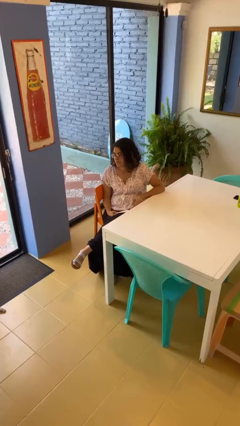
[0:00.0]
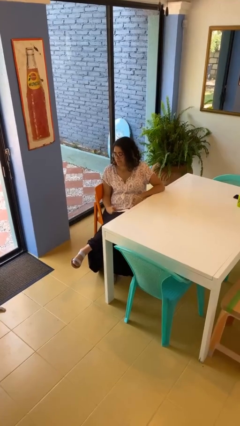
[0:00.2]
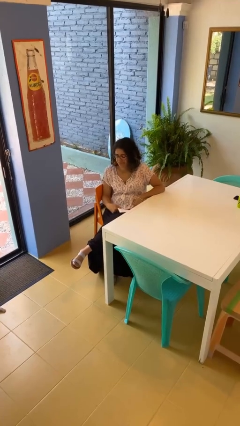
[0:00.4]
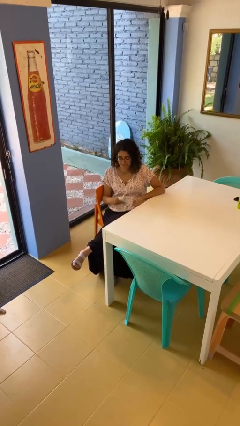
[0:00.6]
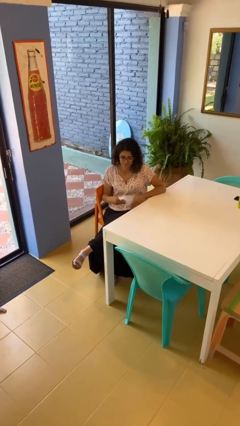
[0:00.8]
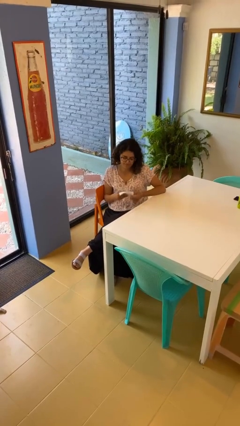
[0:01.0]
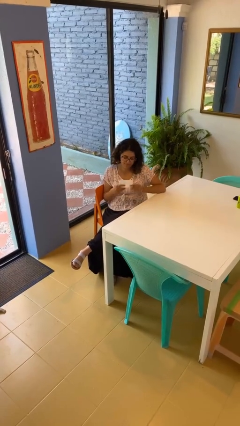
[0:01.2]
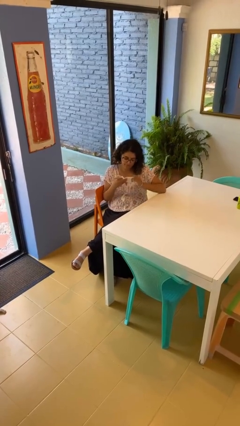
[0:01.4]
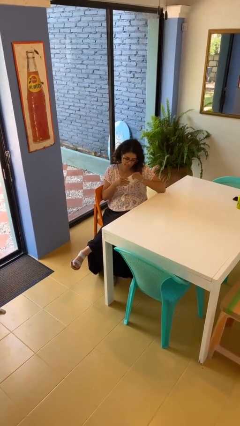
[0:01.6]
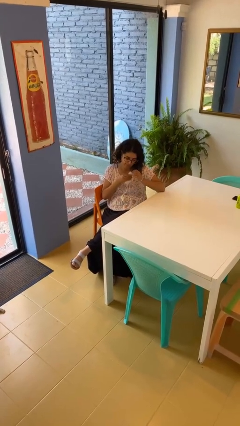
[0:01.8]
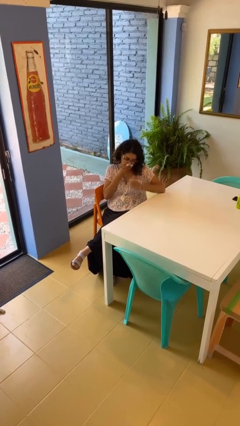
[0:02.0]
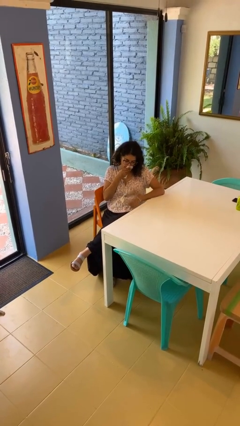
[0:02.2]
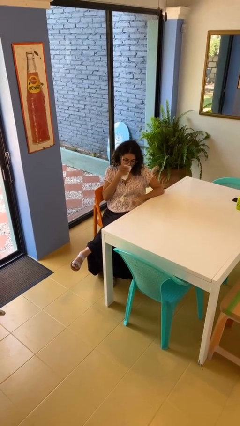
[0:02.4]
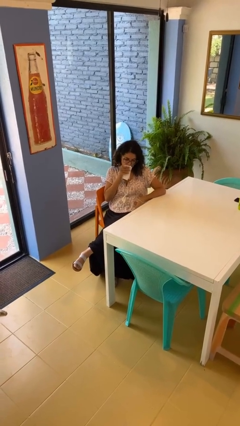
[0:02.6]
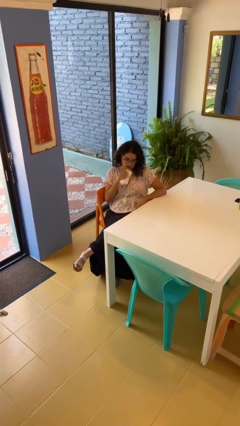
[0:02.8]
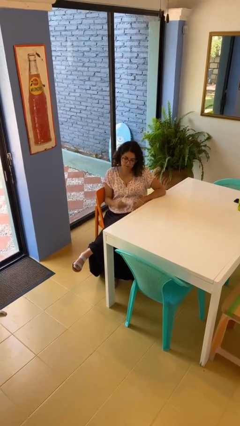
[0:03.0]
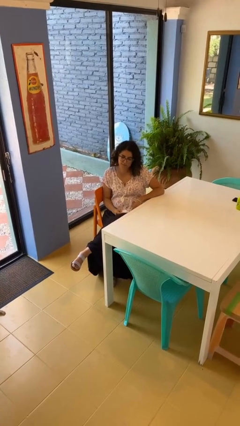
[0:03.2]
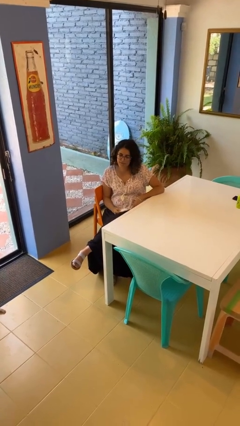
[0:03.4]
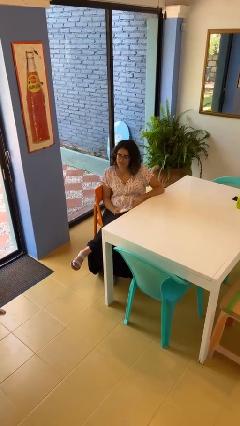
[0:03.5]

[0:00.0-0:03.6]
person wipes mouth with napkin

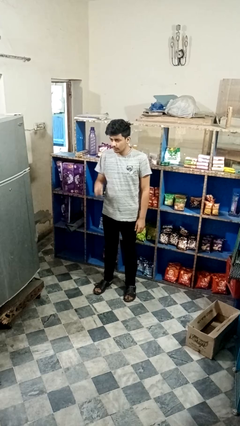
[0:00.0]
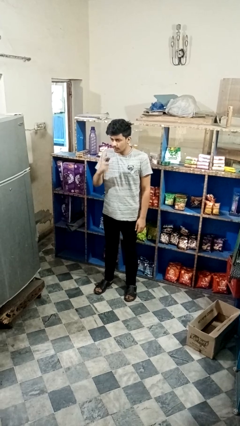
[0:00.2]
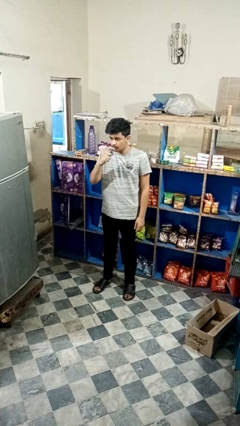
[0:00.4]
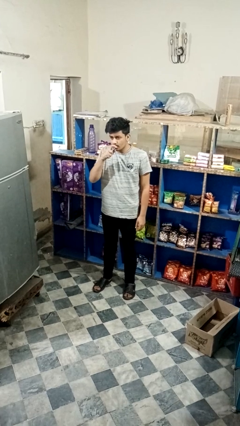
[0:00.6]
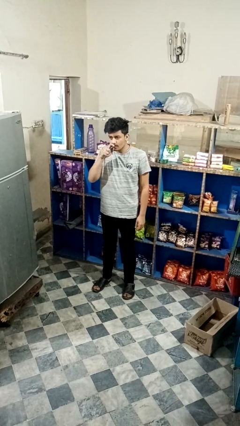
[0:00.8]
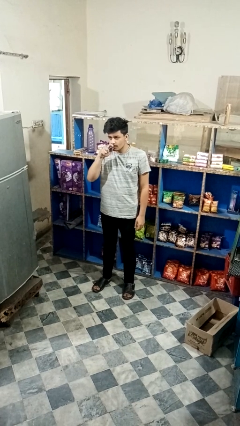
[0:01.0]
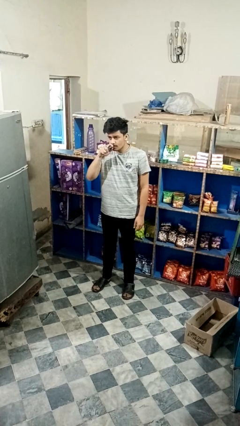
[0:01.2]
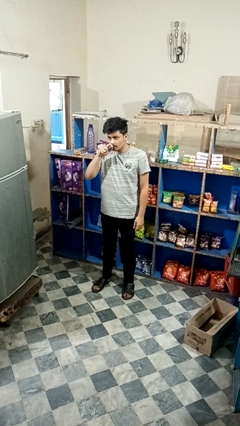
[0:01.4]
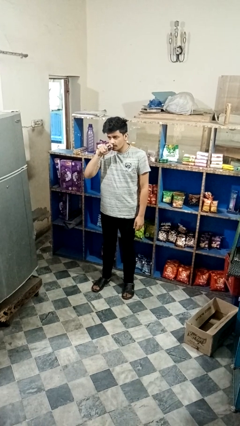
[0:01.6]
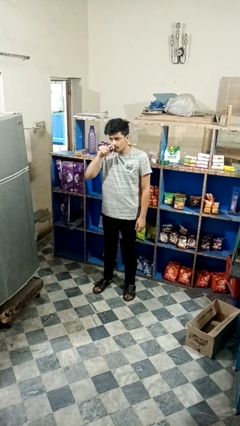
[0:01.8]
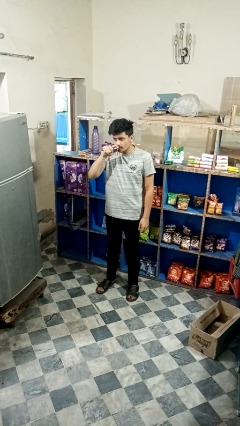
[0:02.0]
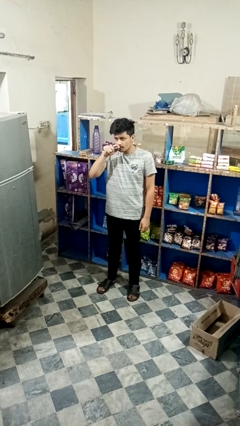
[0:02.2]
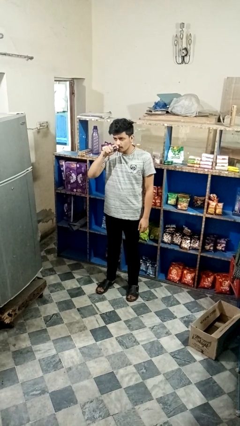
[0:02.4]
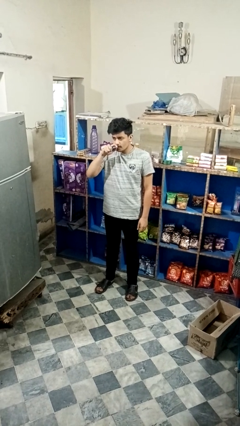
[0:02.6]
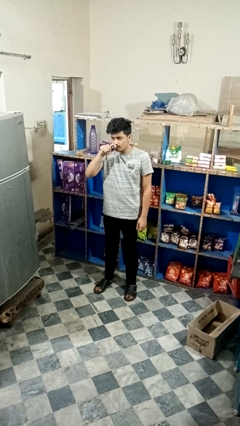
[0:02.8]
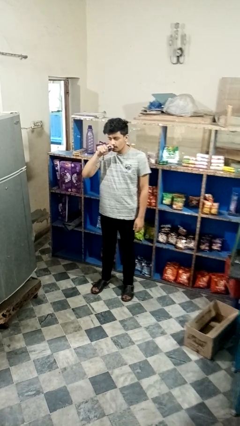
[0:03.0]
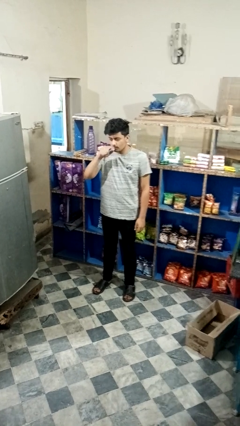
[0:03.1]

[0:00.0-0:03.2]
person vapes

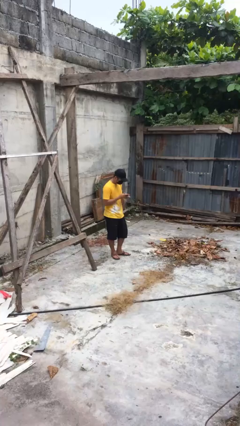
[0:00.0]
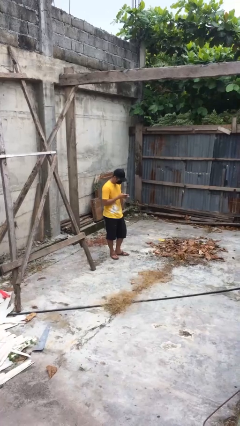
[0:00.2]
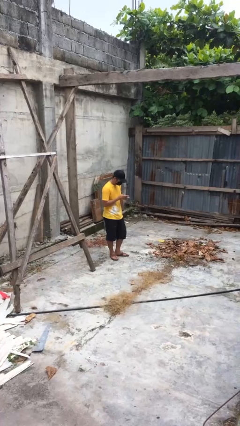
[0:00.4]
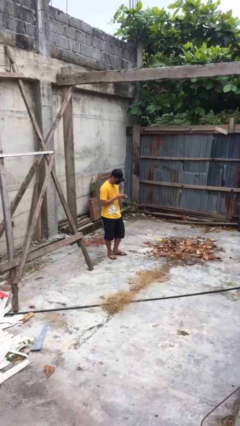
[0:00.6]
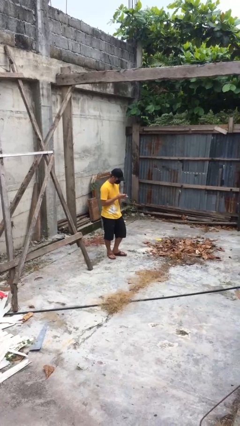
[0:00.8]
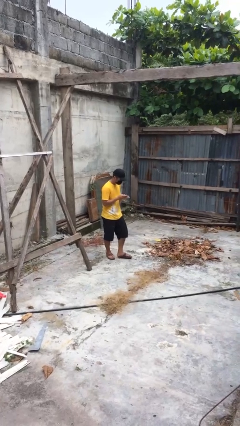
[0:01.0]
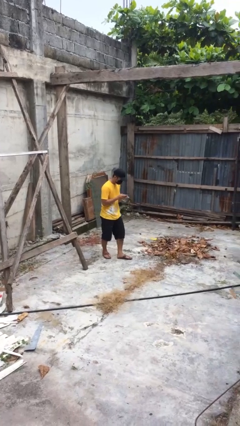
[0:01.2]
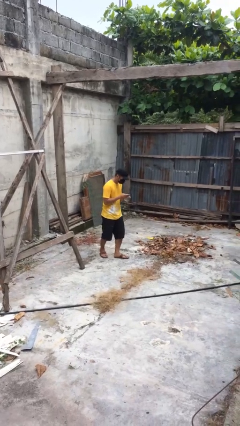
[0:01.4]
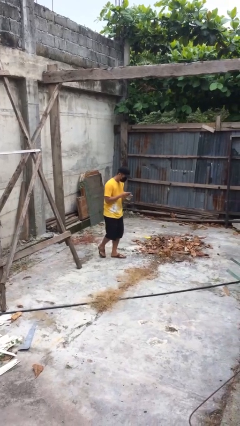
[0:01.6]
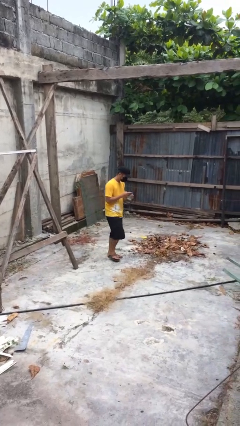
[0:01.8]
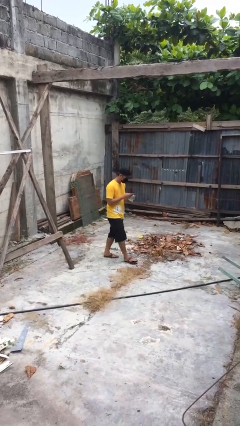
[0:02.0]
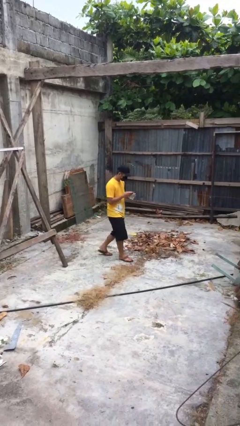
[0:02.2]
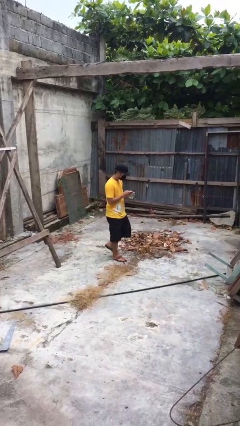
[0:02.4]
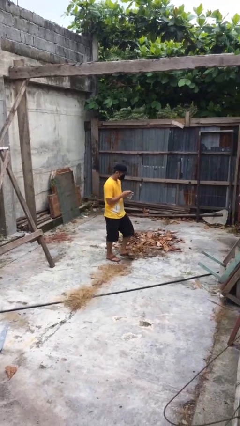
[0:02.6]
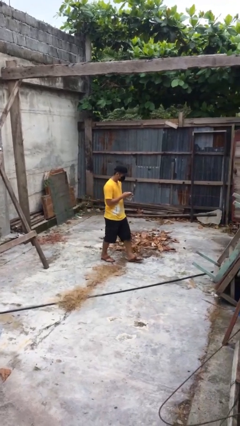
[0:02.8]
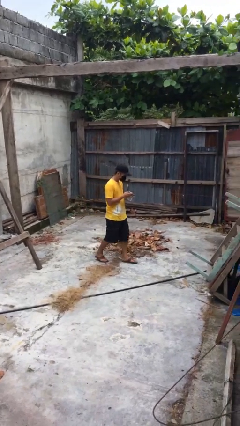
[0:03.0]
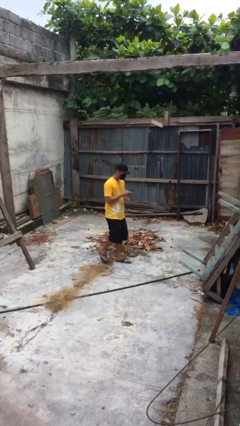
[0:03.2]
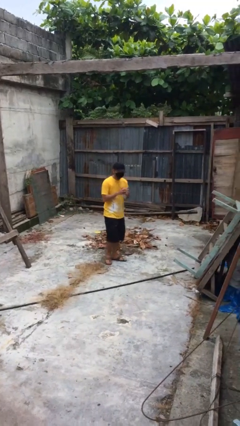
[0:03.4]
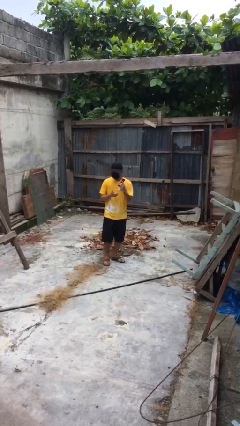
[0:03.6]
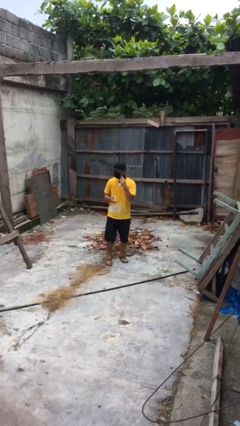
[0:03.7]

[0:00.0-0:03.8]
person texts on phone

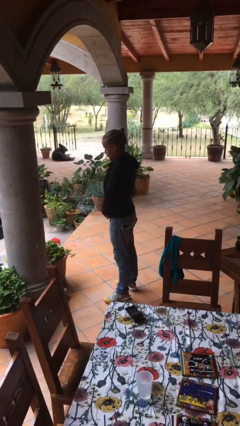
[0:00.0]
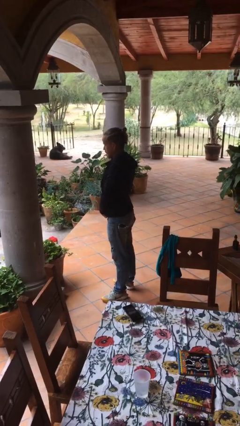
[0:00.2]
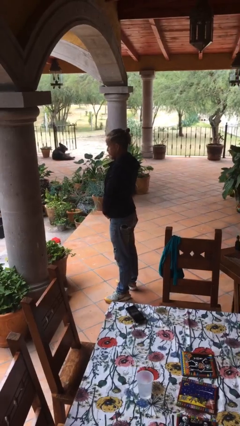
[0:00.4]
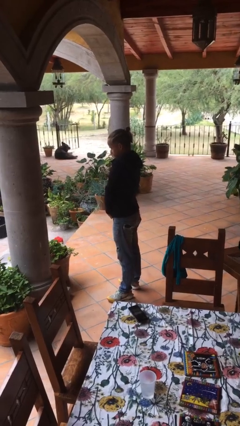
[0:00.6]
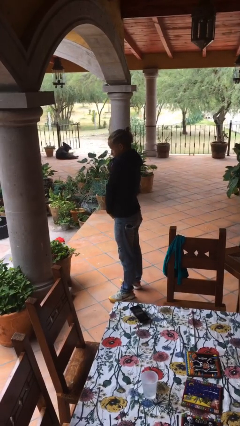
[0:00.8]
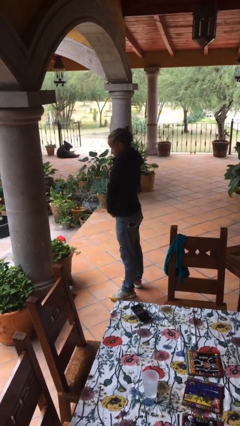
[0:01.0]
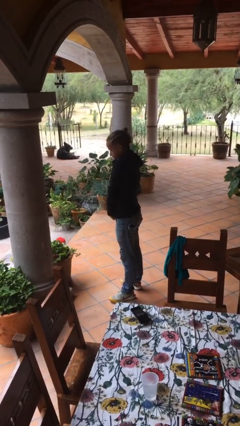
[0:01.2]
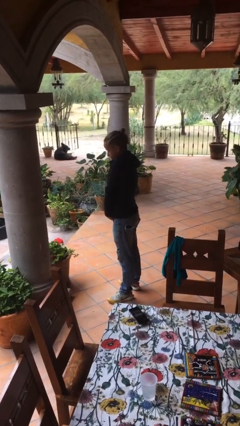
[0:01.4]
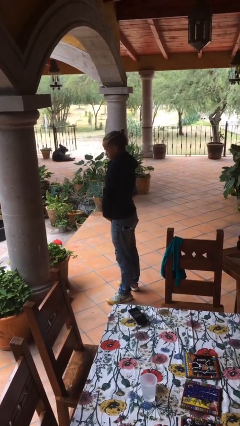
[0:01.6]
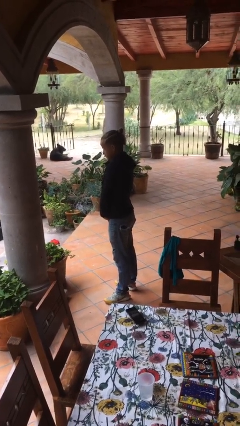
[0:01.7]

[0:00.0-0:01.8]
person unzips jacket

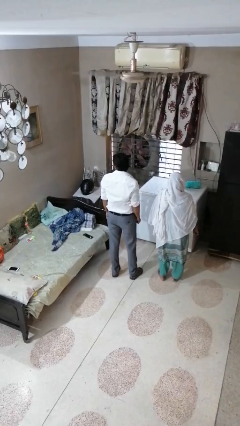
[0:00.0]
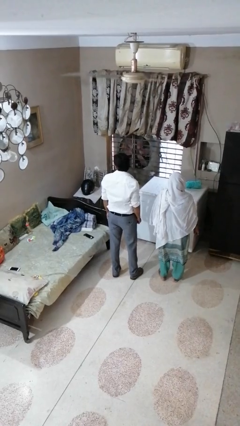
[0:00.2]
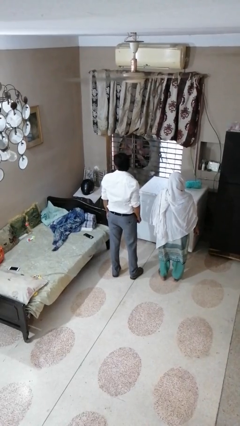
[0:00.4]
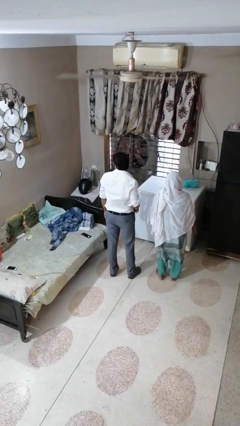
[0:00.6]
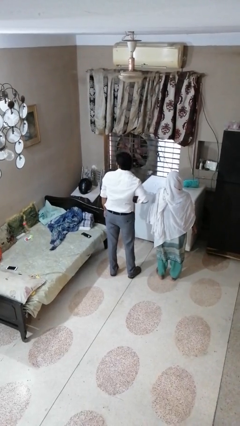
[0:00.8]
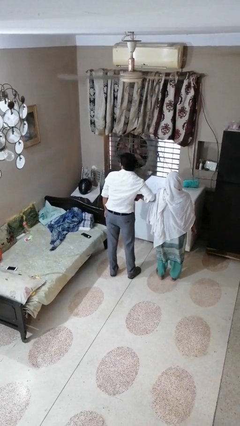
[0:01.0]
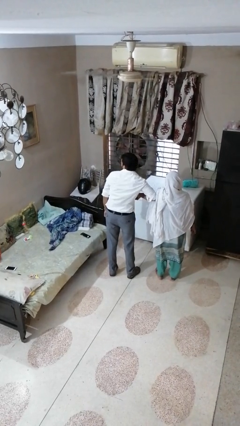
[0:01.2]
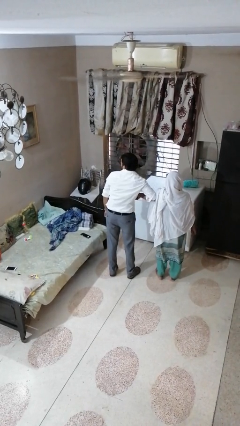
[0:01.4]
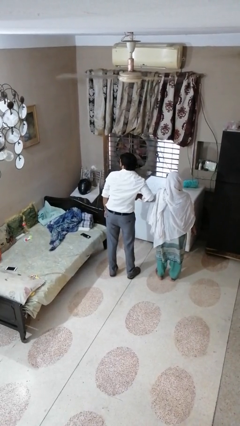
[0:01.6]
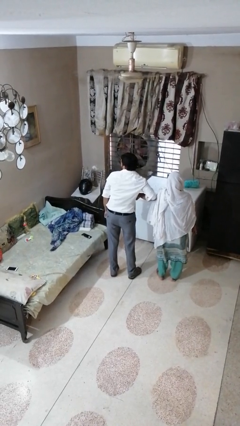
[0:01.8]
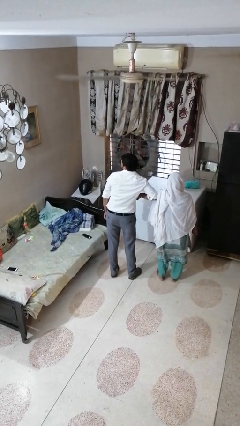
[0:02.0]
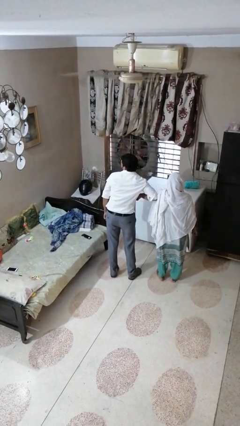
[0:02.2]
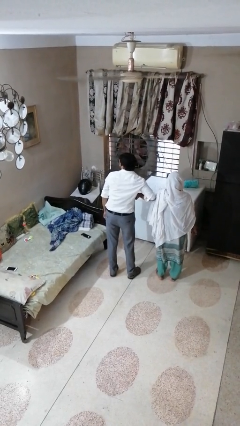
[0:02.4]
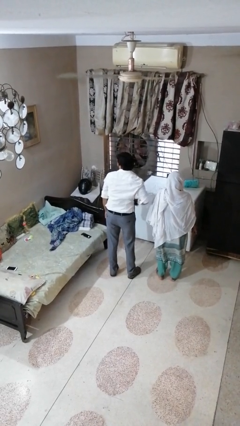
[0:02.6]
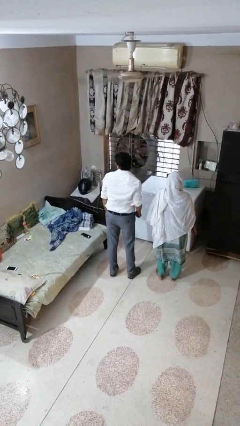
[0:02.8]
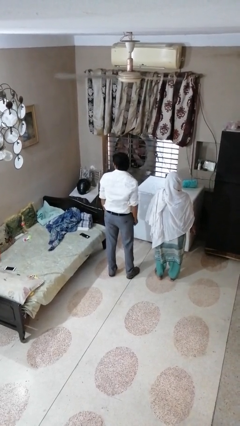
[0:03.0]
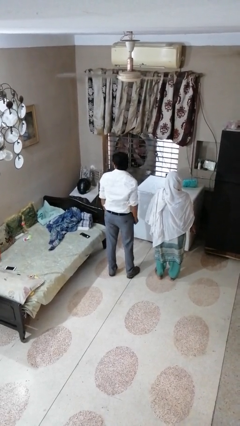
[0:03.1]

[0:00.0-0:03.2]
person nudges person with elbow

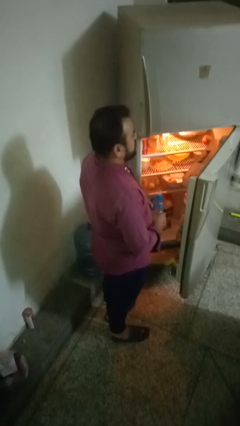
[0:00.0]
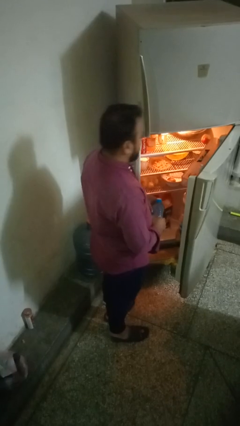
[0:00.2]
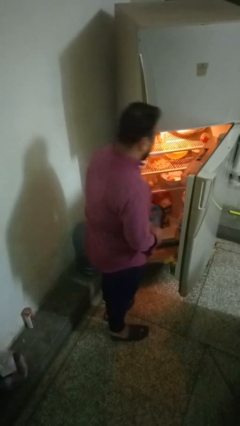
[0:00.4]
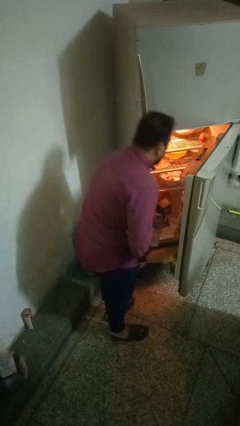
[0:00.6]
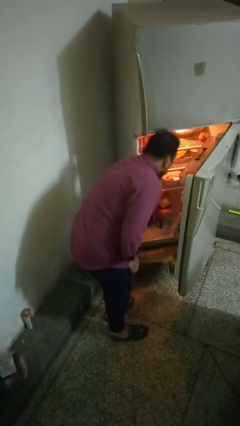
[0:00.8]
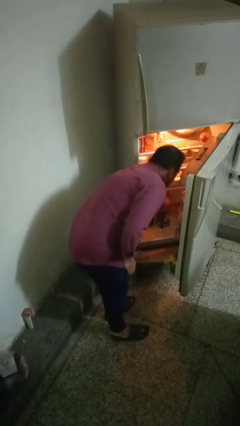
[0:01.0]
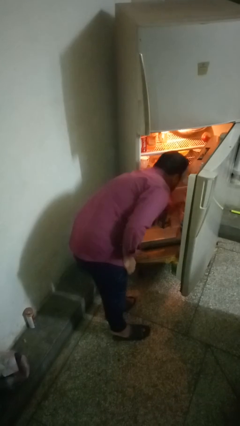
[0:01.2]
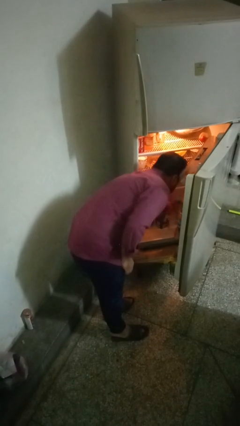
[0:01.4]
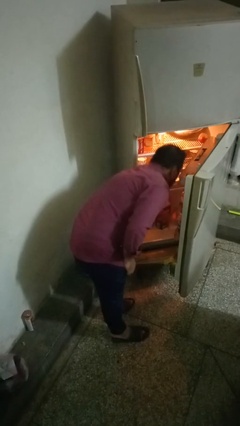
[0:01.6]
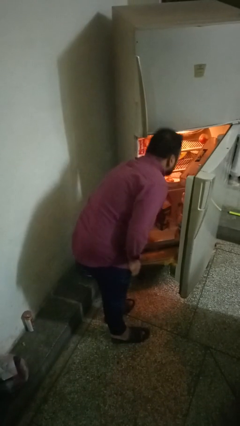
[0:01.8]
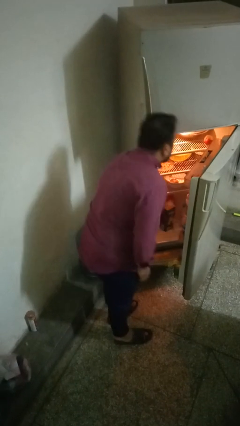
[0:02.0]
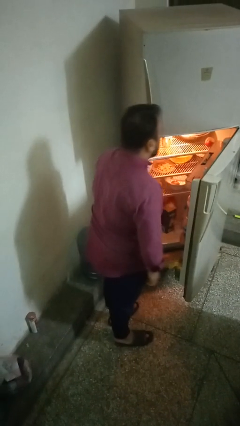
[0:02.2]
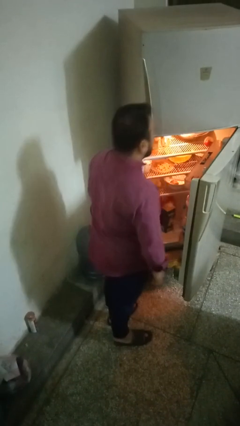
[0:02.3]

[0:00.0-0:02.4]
person puts object into refrigerator
